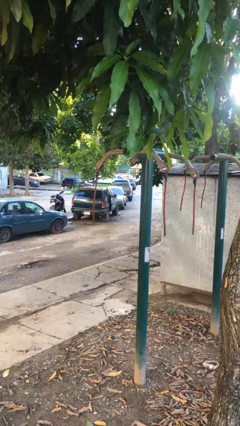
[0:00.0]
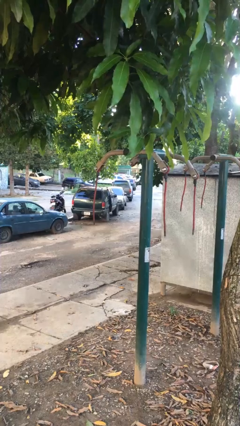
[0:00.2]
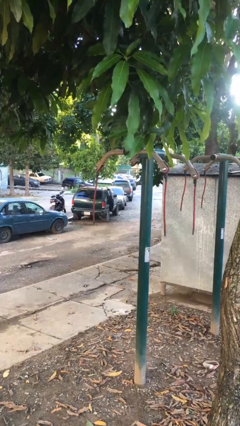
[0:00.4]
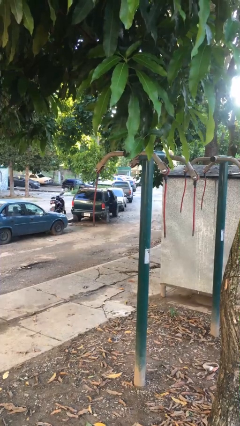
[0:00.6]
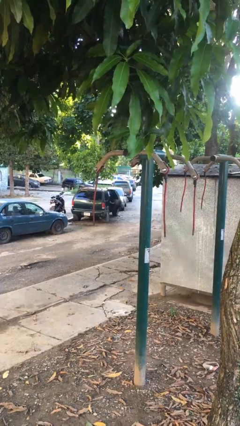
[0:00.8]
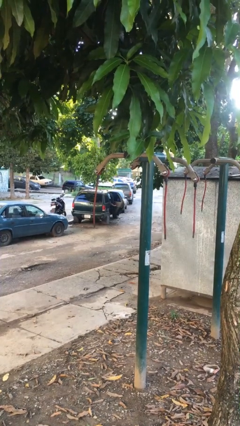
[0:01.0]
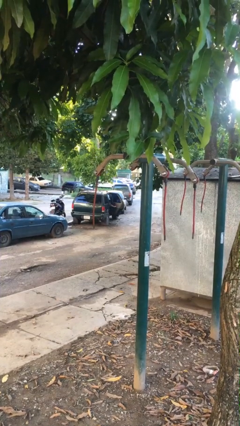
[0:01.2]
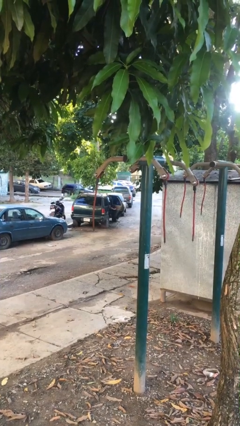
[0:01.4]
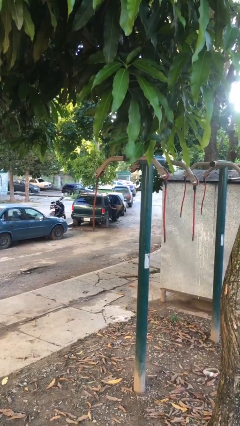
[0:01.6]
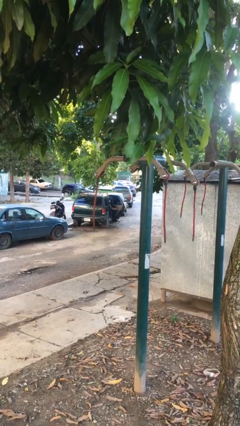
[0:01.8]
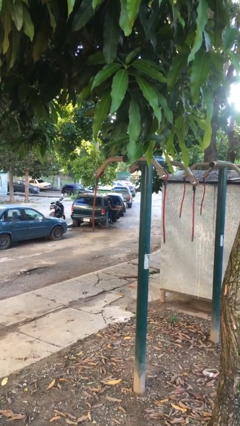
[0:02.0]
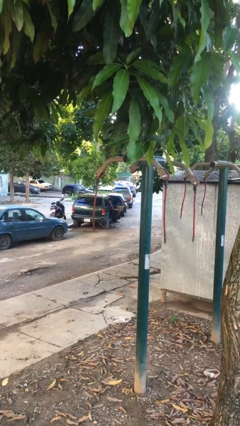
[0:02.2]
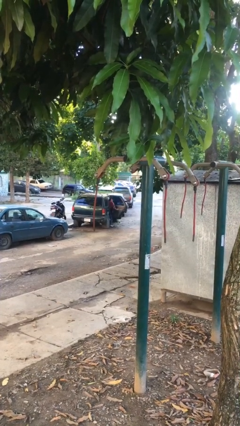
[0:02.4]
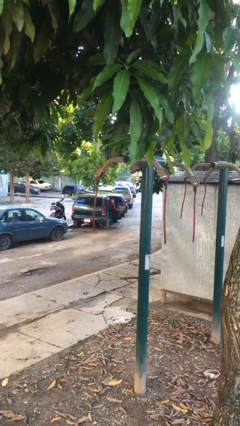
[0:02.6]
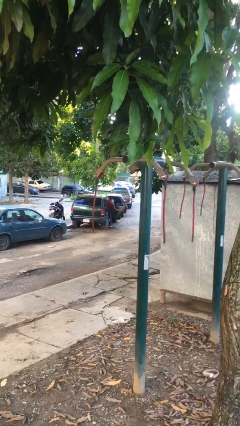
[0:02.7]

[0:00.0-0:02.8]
person opens car door

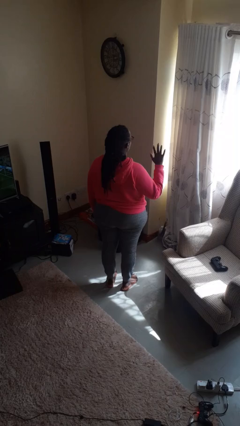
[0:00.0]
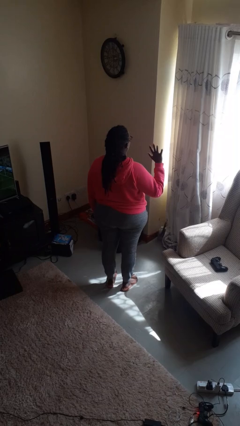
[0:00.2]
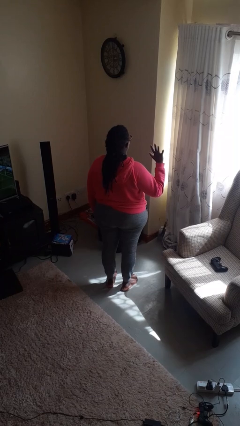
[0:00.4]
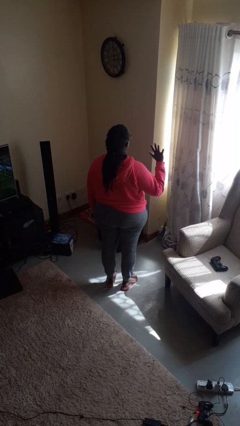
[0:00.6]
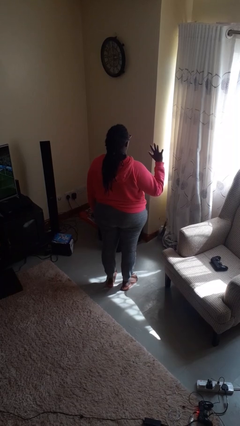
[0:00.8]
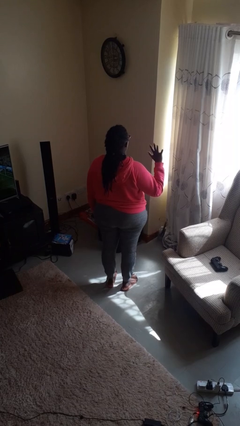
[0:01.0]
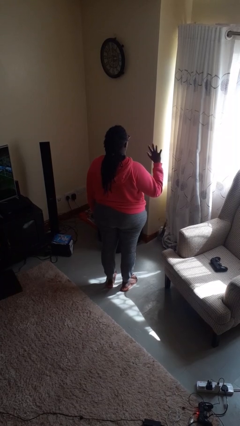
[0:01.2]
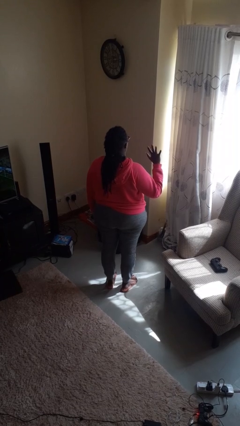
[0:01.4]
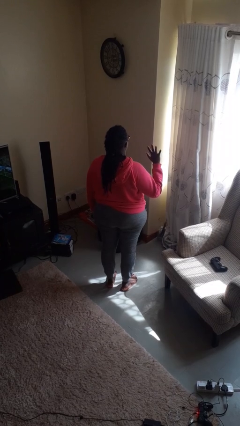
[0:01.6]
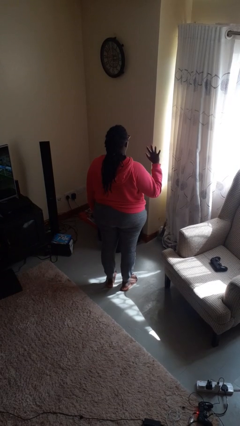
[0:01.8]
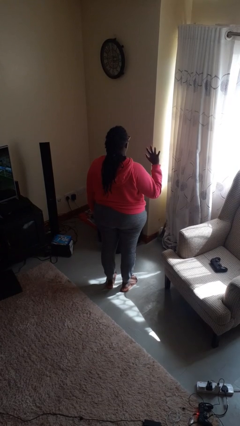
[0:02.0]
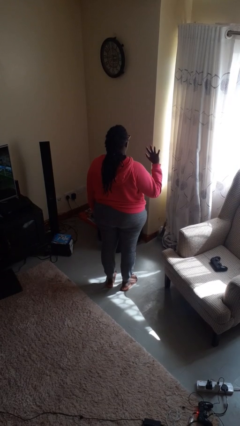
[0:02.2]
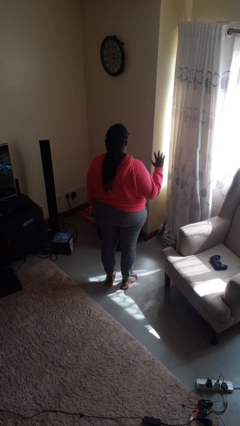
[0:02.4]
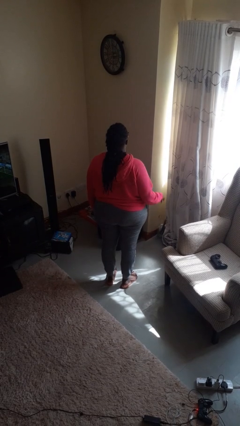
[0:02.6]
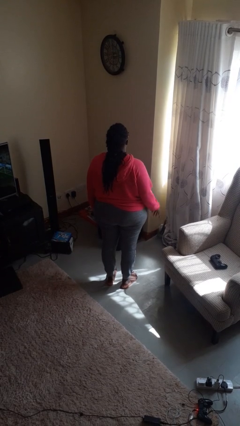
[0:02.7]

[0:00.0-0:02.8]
person gestures number five

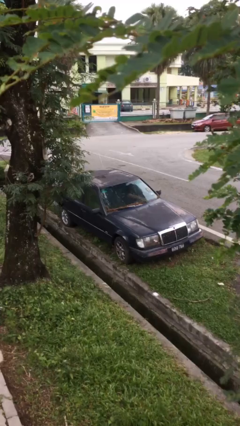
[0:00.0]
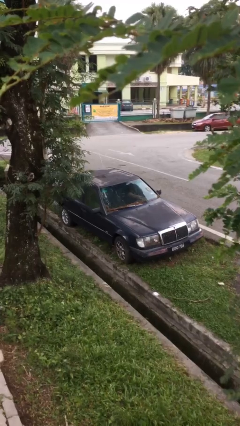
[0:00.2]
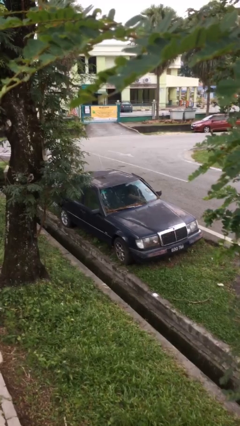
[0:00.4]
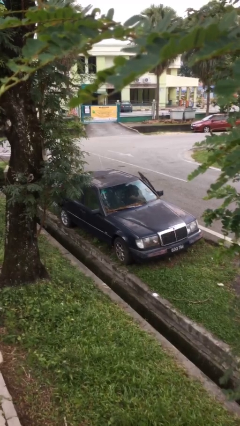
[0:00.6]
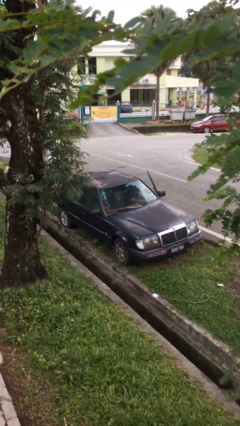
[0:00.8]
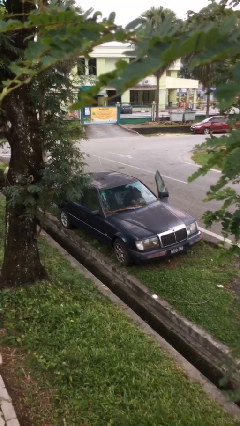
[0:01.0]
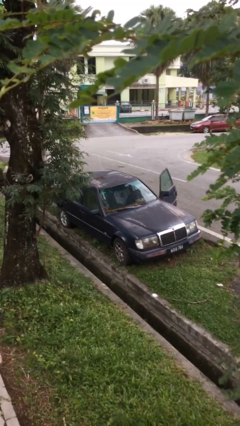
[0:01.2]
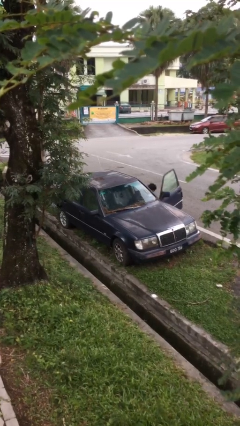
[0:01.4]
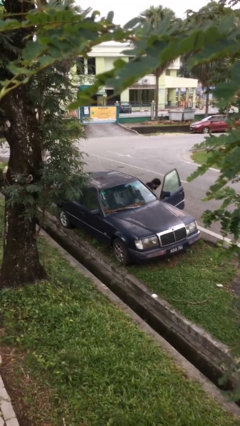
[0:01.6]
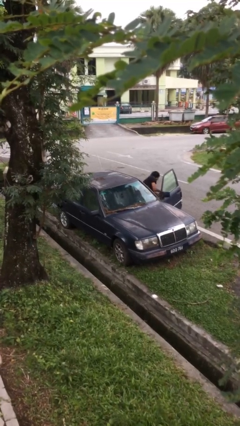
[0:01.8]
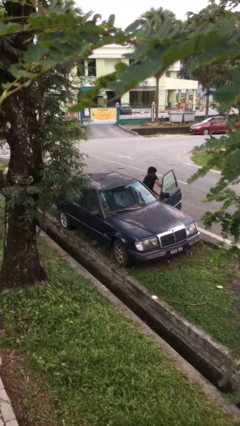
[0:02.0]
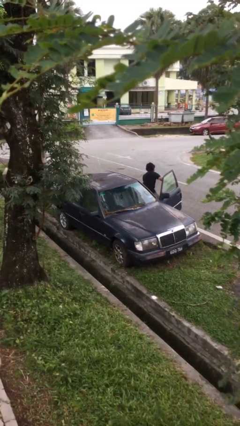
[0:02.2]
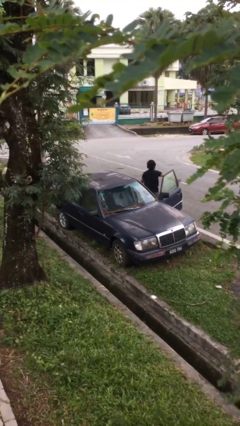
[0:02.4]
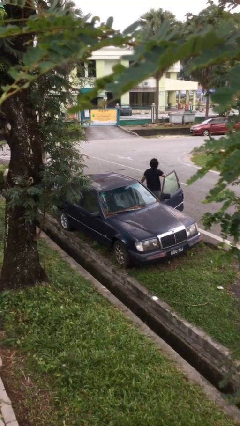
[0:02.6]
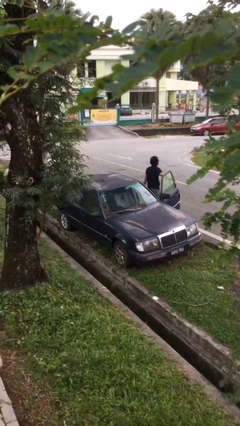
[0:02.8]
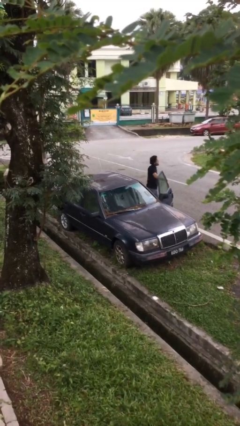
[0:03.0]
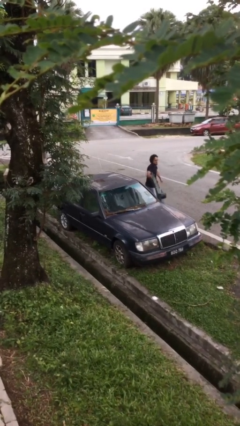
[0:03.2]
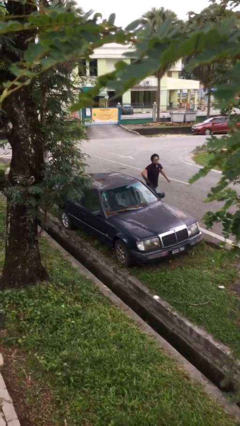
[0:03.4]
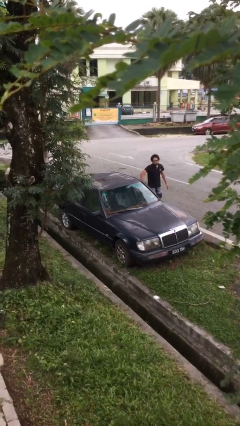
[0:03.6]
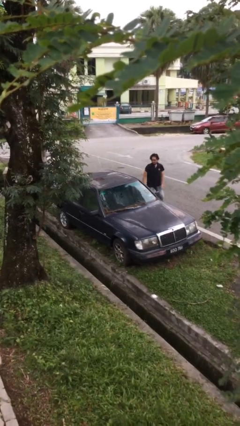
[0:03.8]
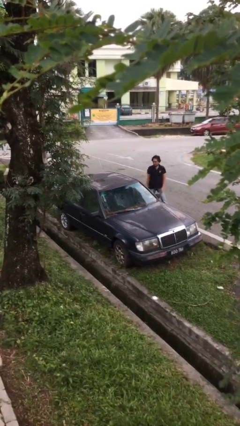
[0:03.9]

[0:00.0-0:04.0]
car drops off person

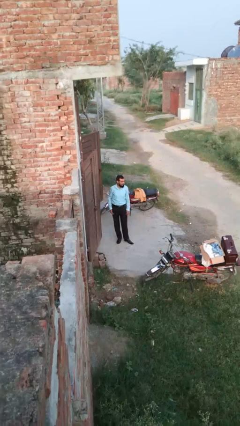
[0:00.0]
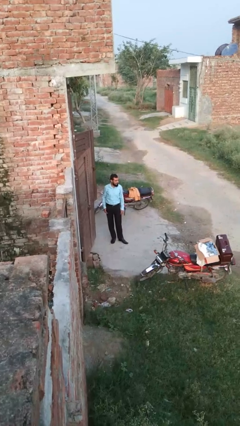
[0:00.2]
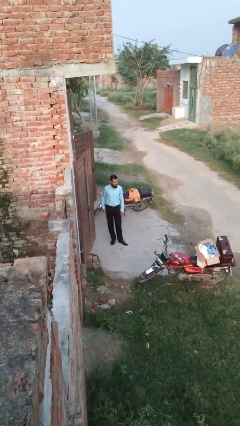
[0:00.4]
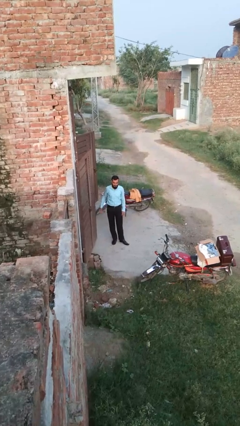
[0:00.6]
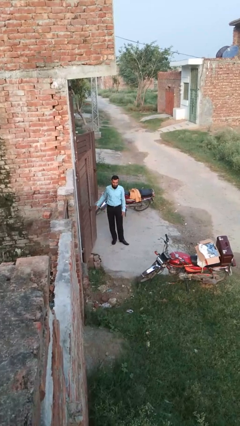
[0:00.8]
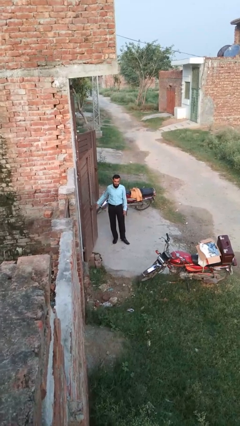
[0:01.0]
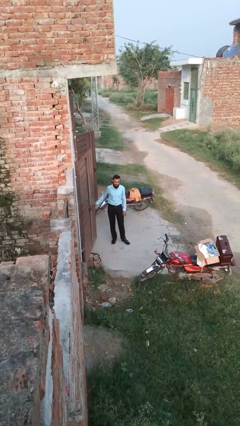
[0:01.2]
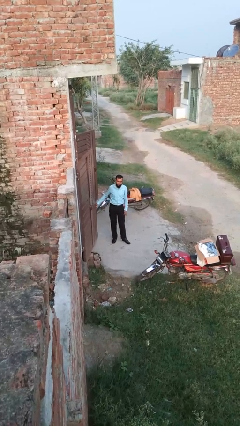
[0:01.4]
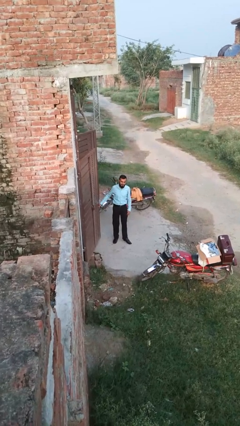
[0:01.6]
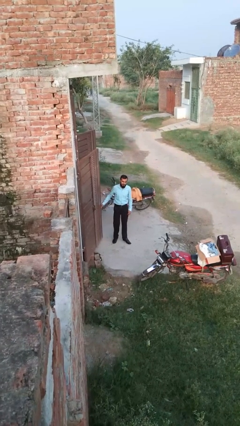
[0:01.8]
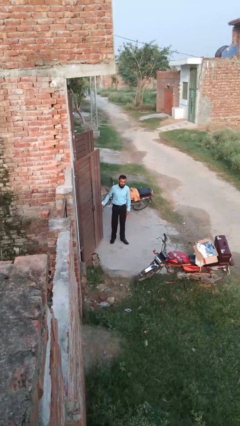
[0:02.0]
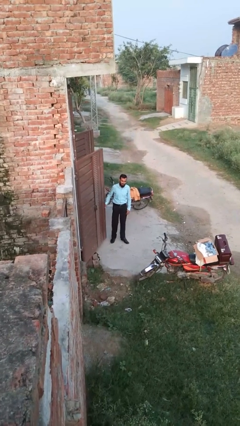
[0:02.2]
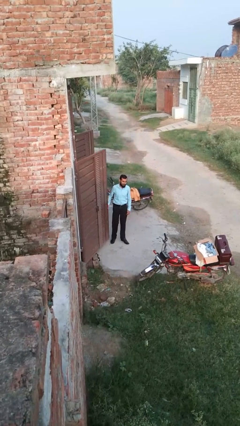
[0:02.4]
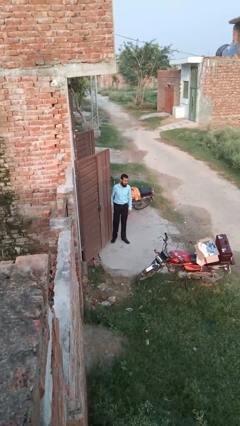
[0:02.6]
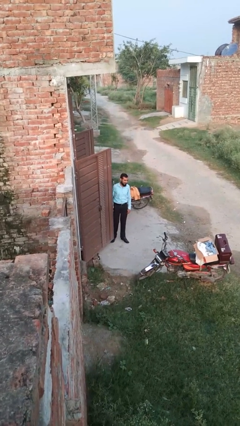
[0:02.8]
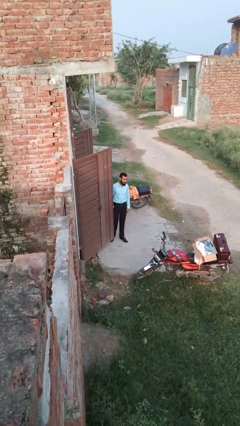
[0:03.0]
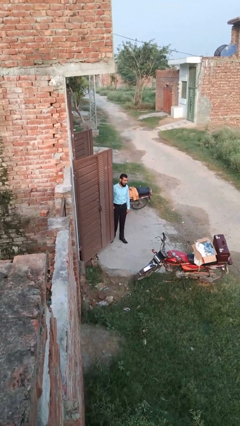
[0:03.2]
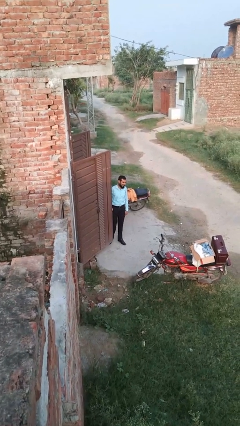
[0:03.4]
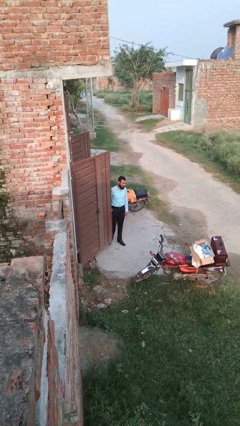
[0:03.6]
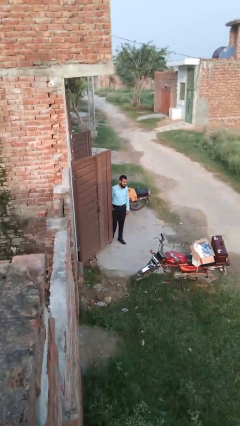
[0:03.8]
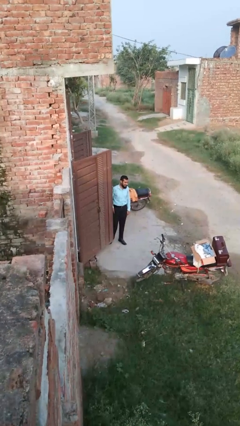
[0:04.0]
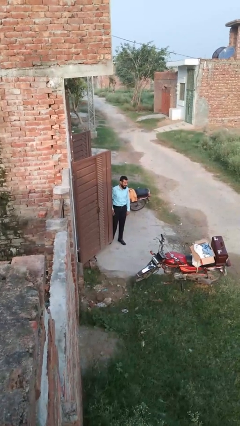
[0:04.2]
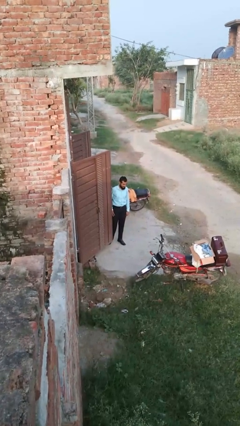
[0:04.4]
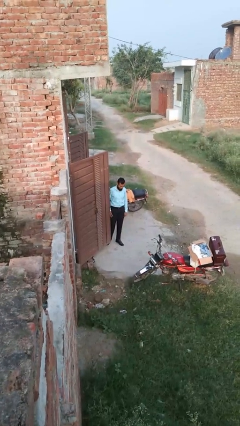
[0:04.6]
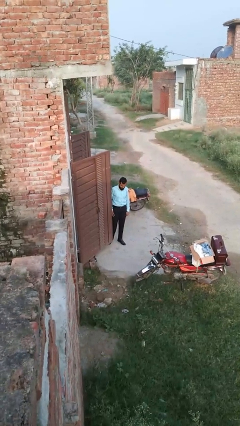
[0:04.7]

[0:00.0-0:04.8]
person opens facility door

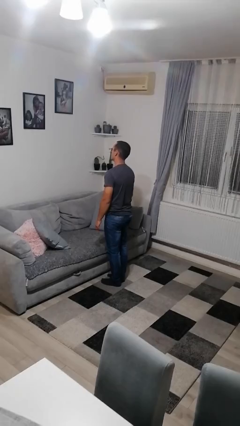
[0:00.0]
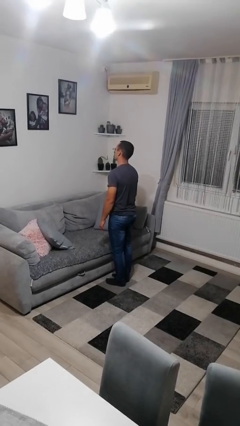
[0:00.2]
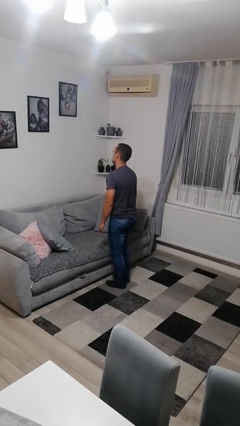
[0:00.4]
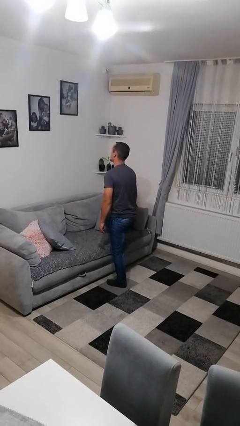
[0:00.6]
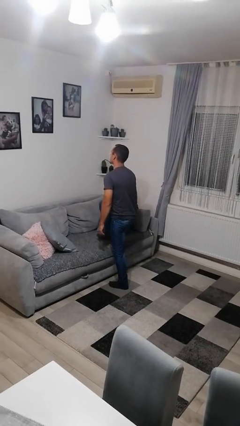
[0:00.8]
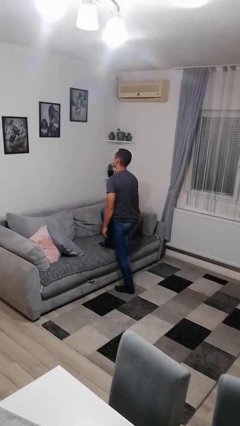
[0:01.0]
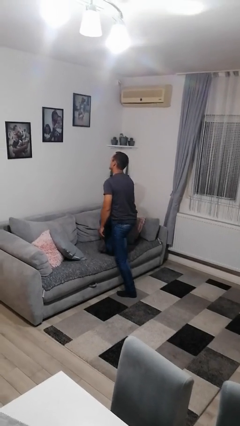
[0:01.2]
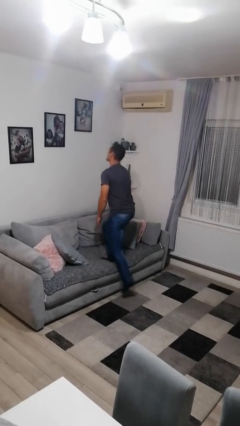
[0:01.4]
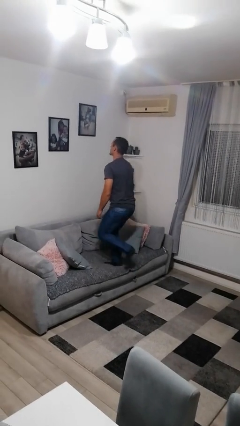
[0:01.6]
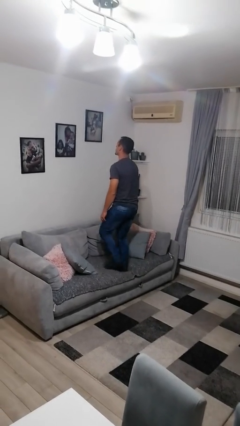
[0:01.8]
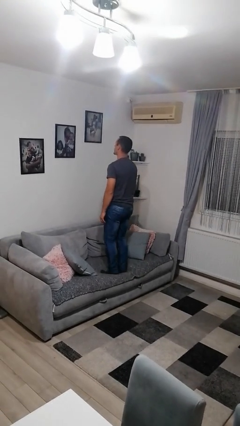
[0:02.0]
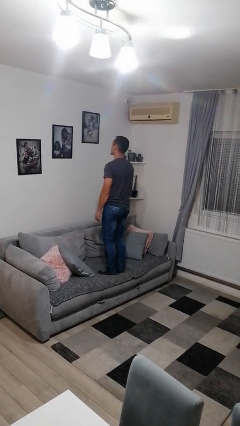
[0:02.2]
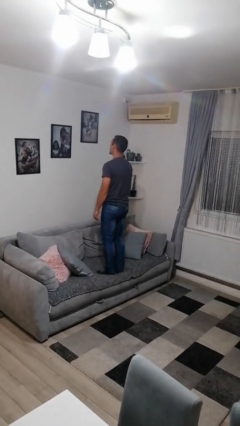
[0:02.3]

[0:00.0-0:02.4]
person climbs on couch

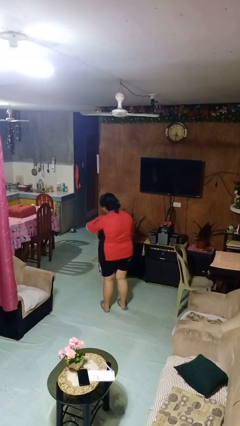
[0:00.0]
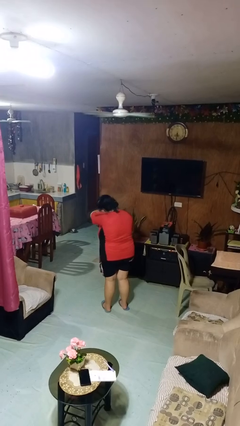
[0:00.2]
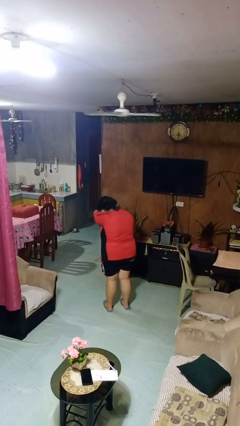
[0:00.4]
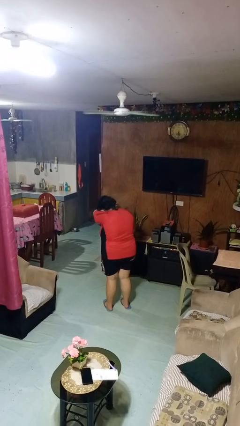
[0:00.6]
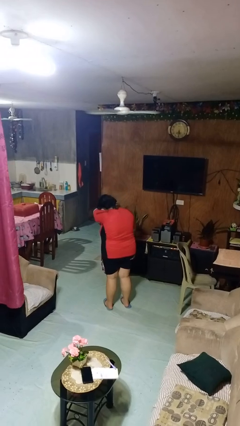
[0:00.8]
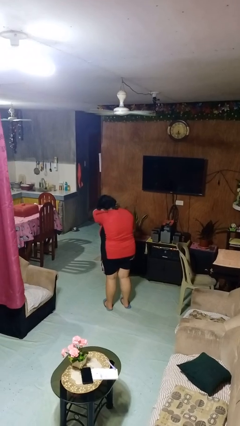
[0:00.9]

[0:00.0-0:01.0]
person sneezes into arm
